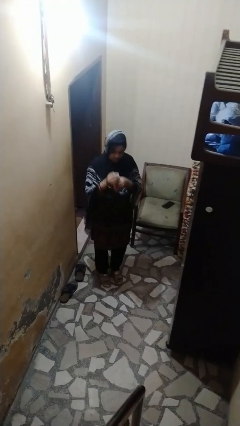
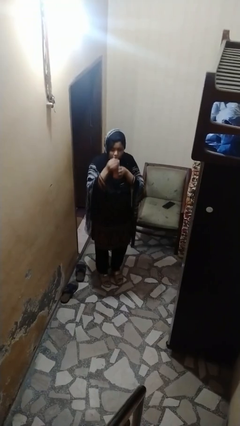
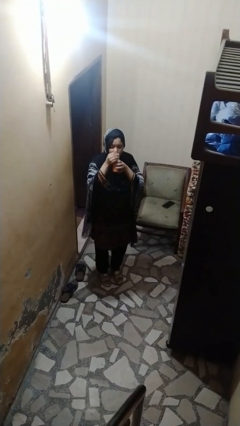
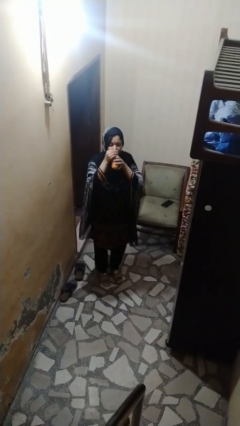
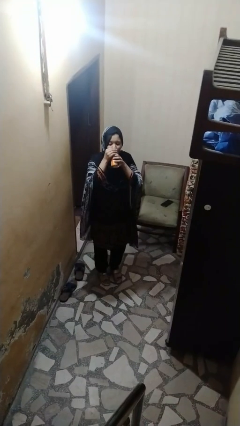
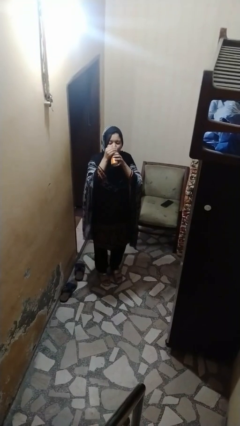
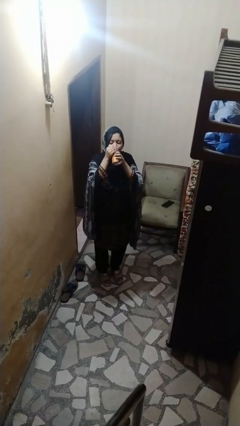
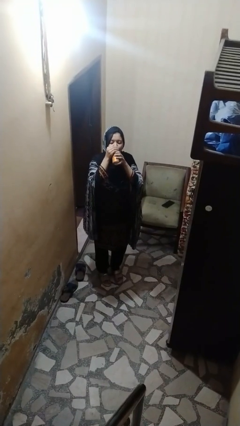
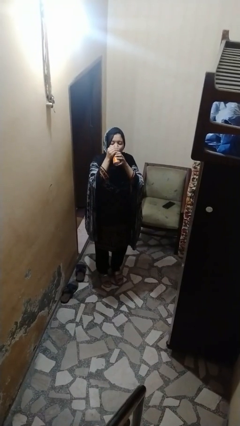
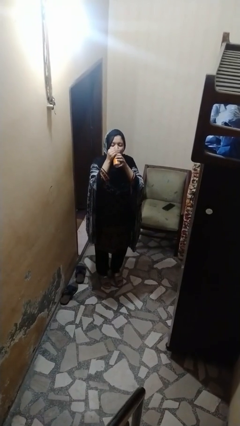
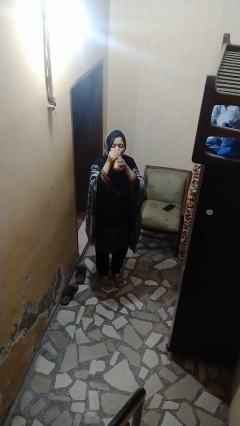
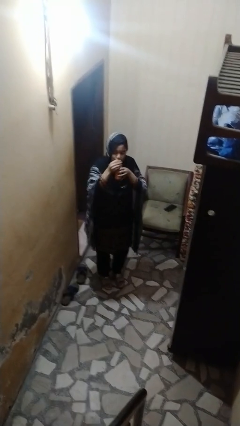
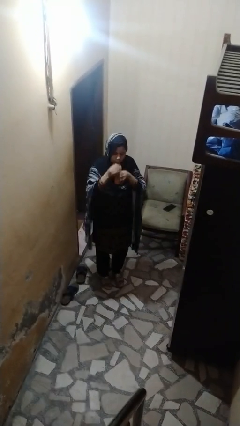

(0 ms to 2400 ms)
person drinks from beverage can

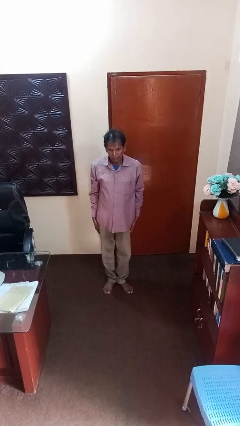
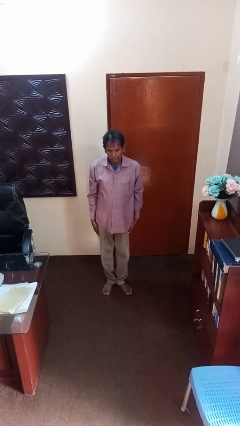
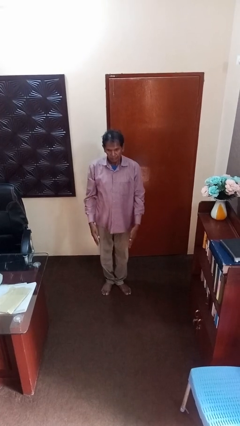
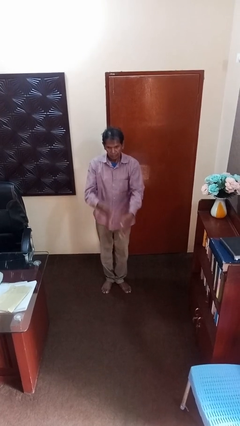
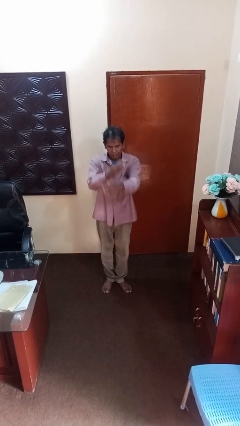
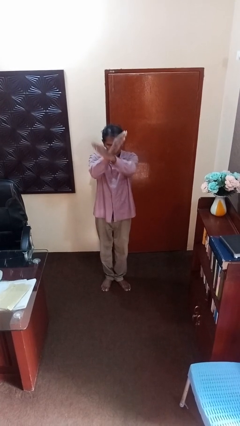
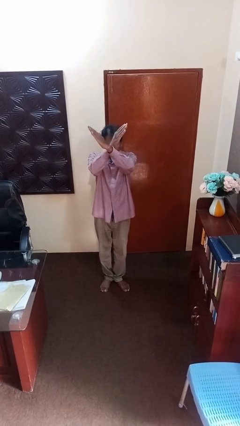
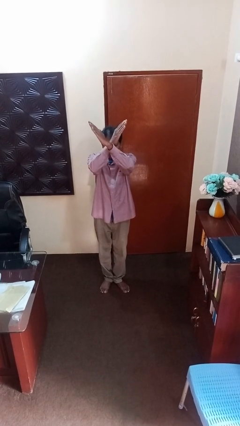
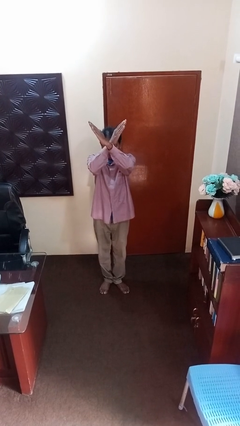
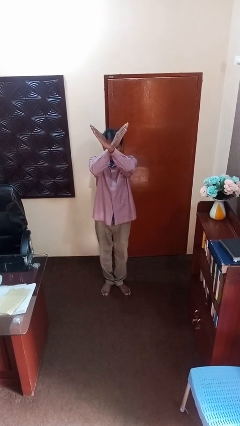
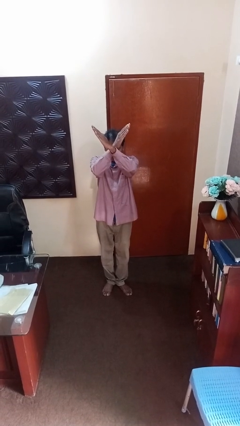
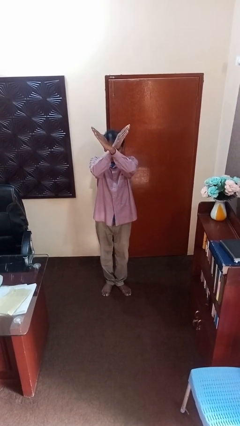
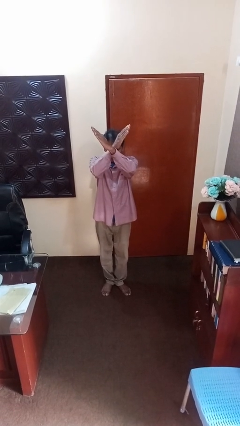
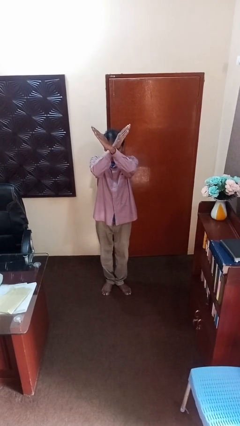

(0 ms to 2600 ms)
person gestures arms x

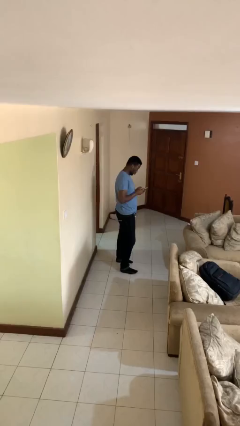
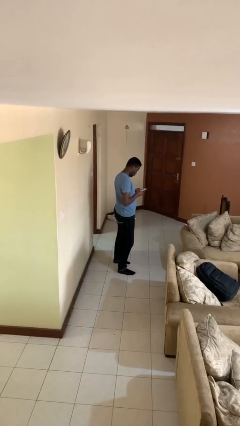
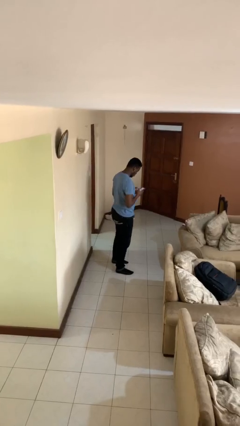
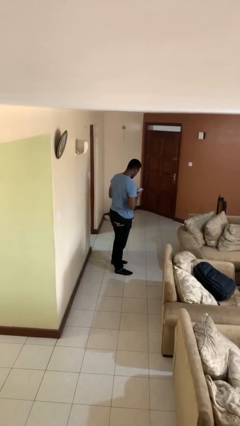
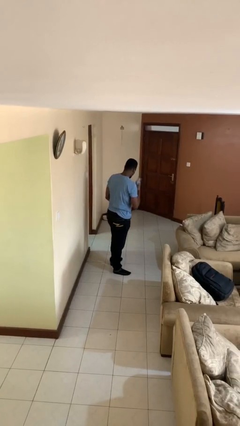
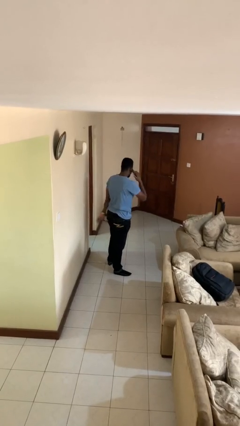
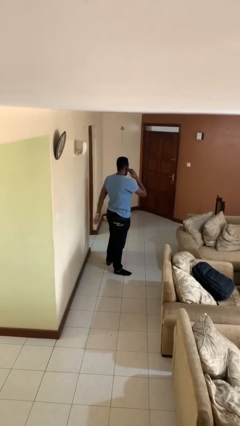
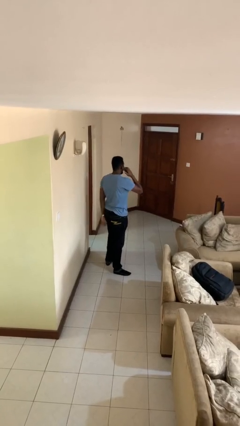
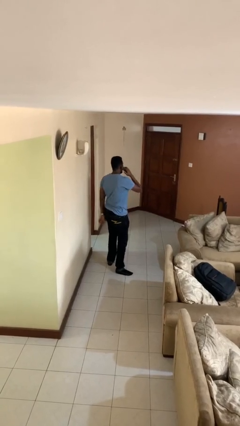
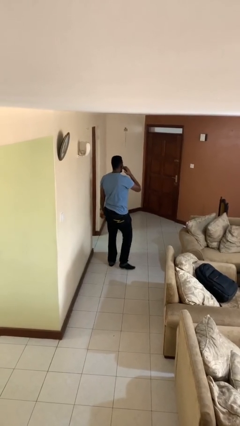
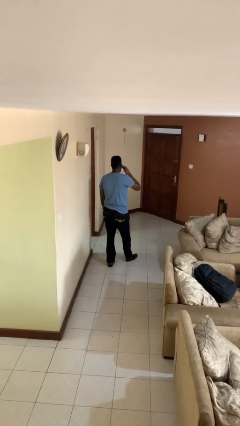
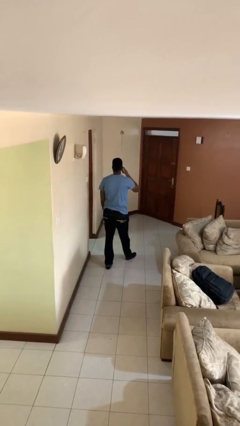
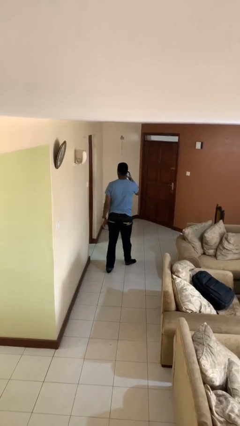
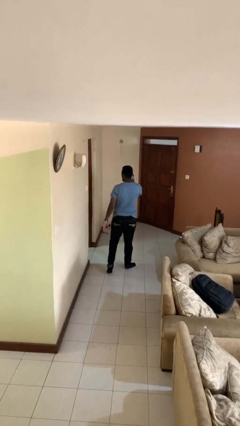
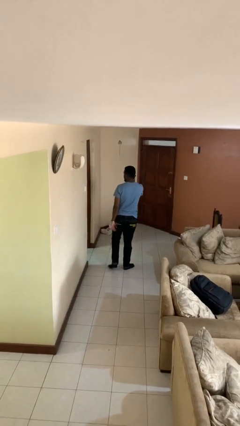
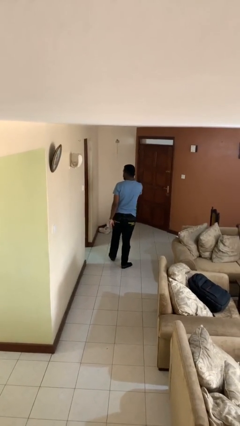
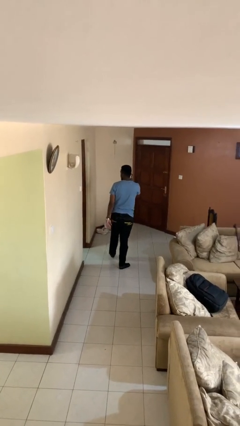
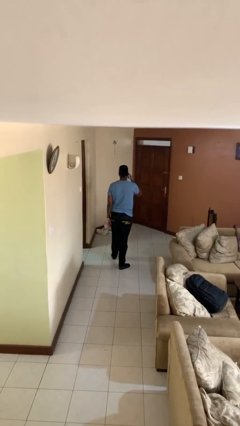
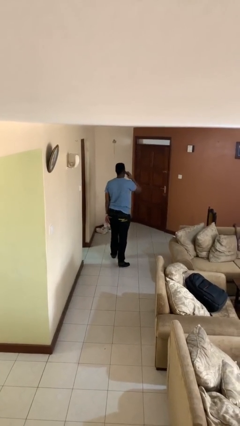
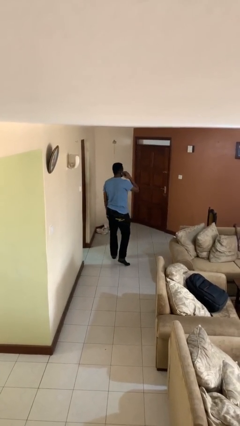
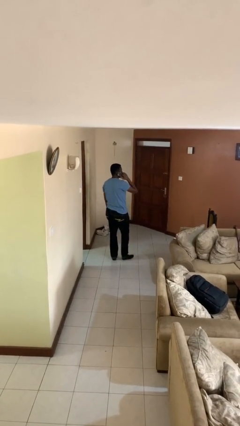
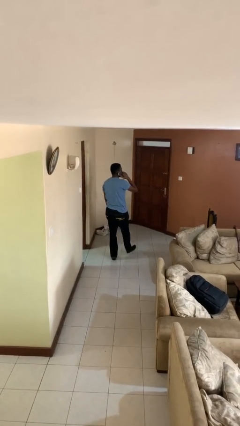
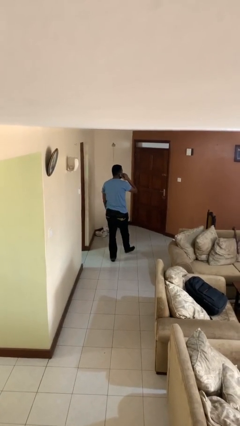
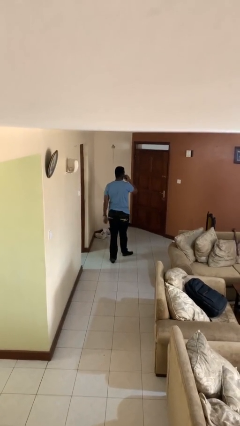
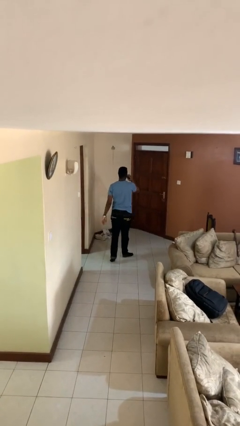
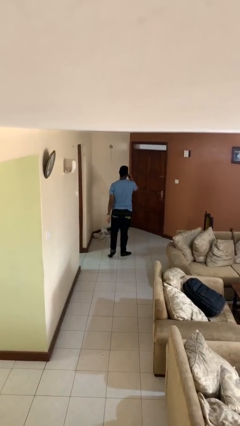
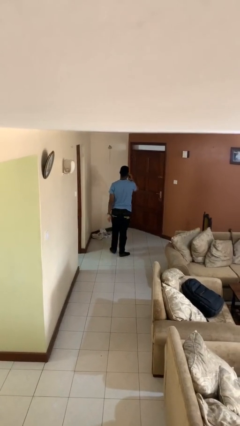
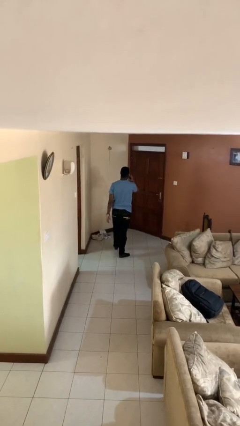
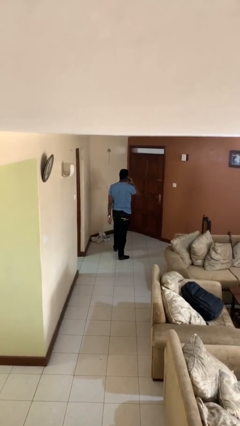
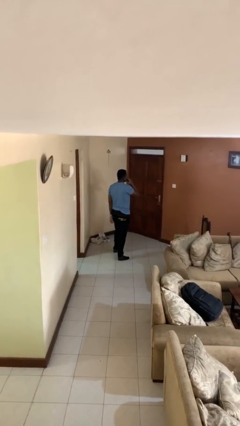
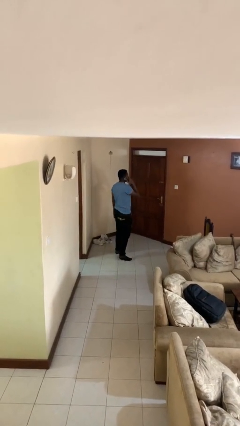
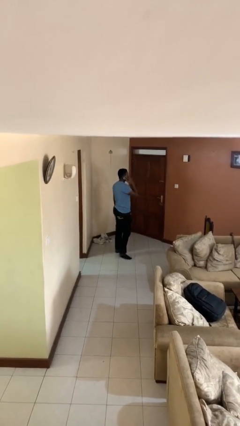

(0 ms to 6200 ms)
person talks on phone

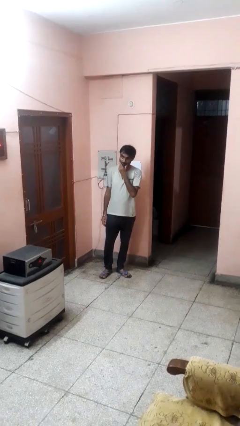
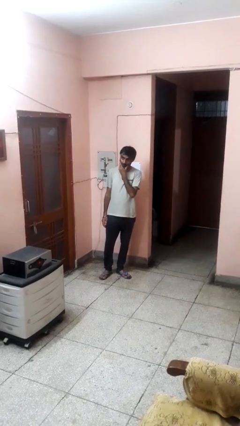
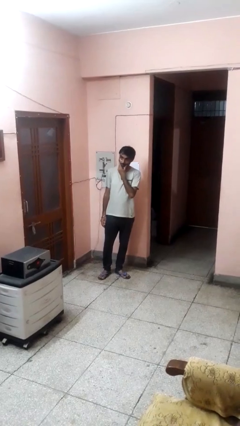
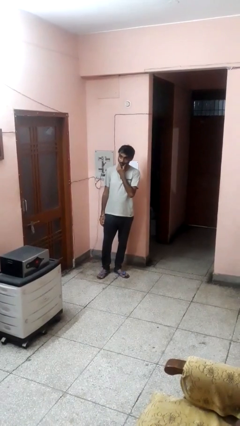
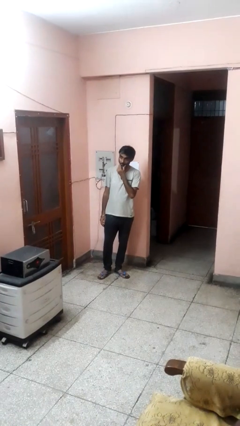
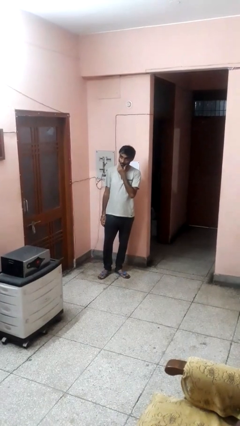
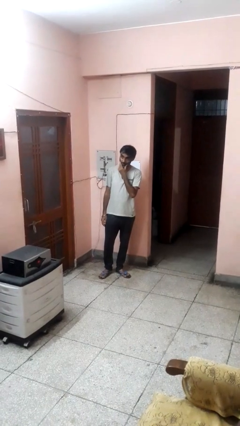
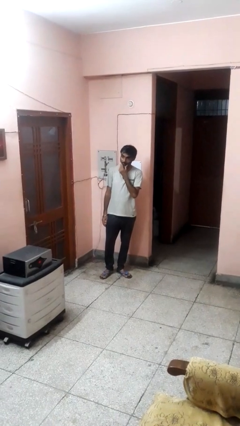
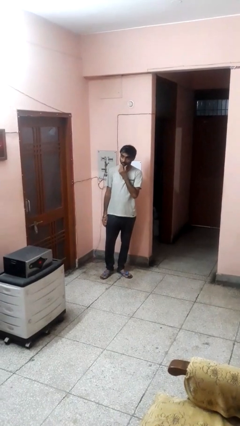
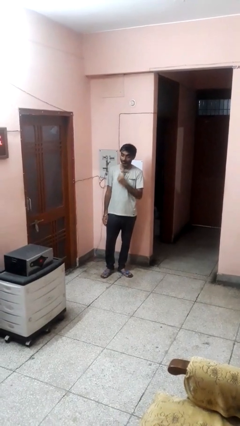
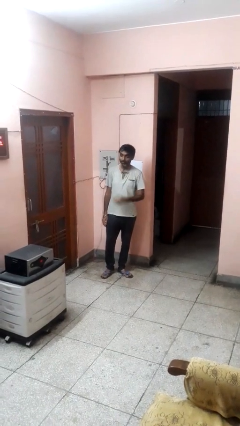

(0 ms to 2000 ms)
person strokes chin

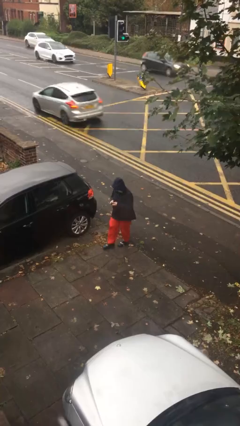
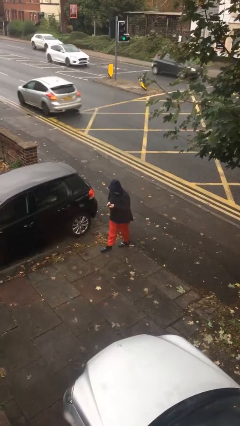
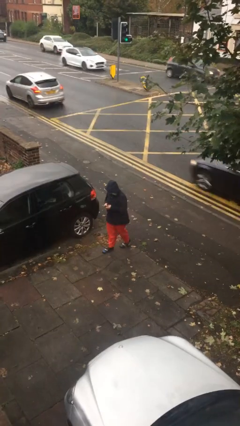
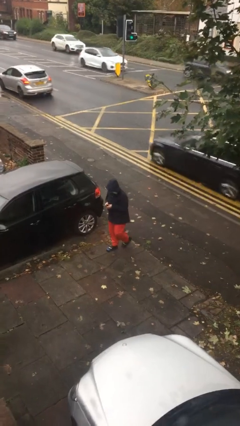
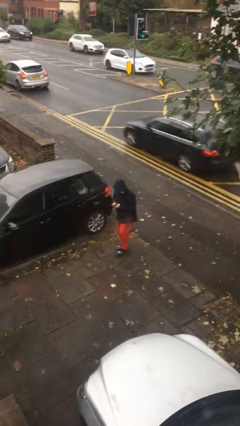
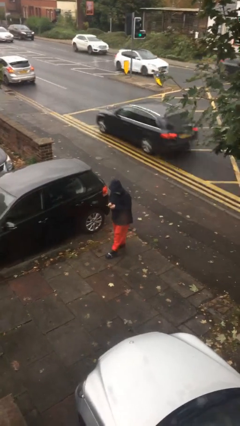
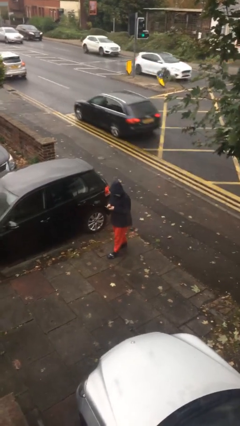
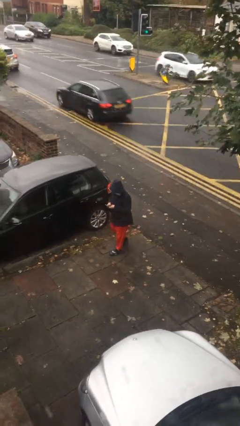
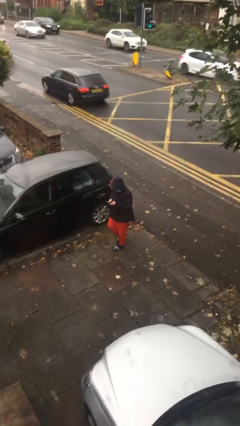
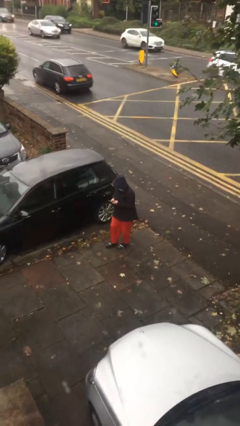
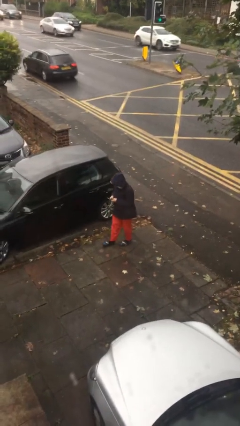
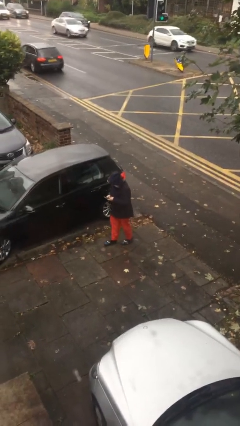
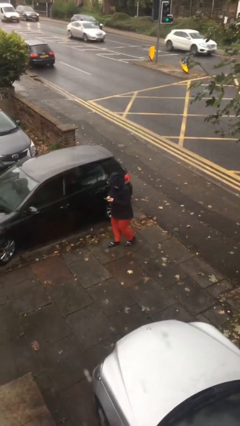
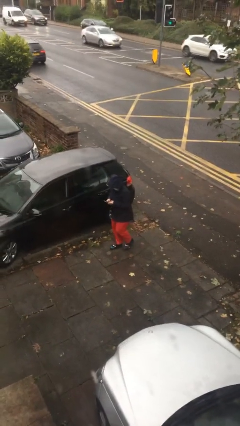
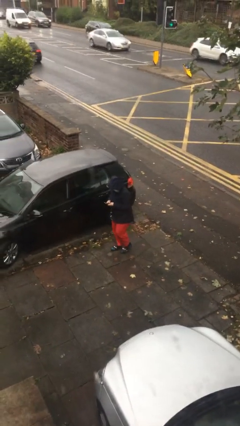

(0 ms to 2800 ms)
person texts on phone

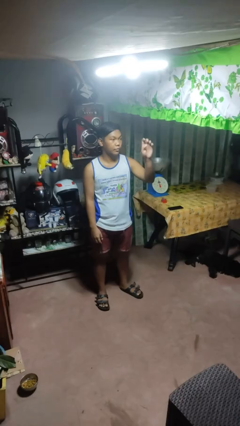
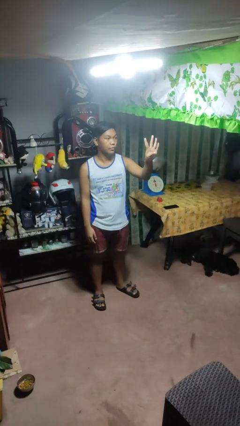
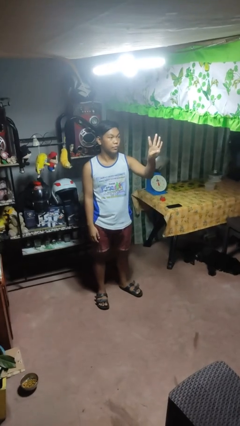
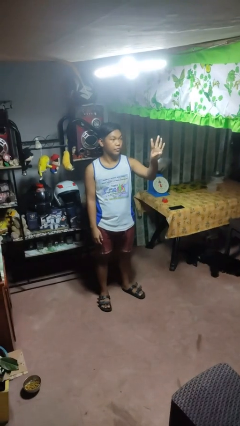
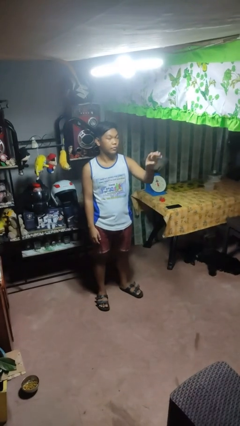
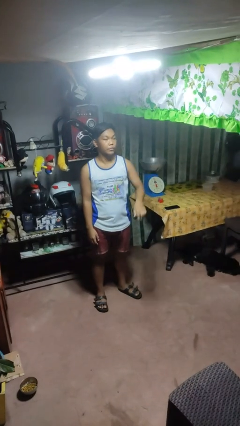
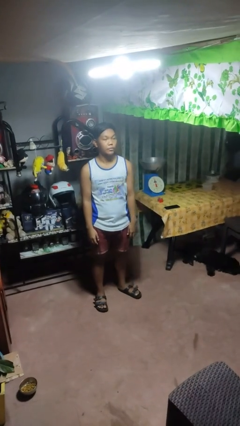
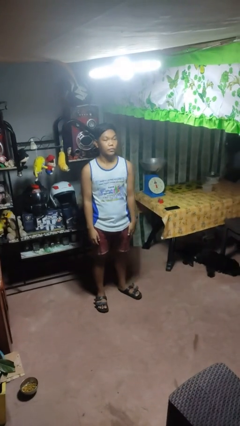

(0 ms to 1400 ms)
person gestures number four

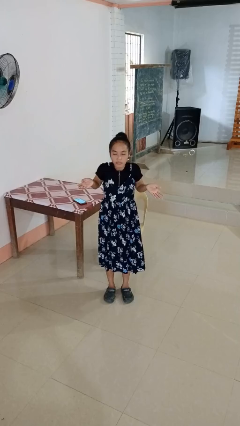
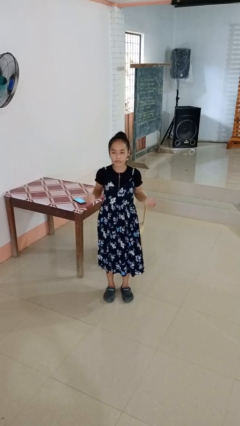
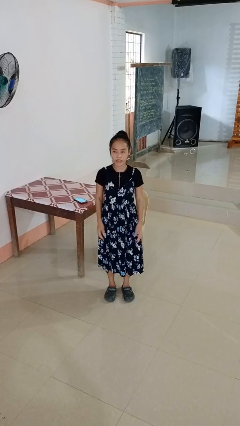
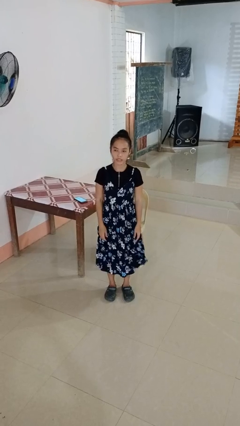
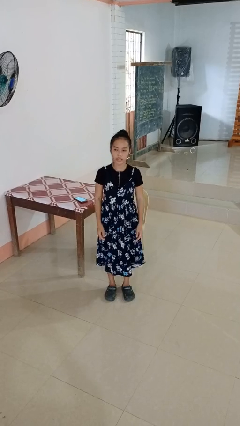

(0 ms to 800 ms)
person shrugs
